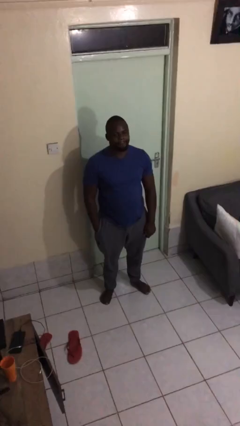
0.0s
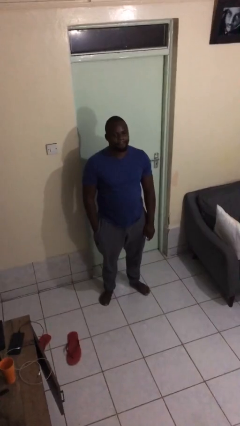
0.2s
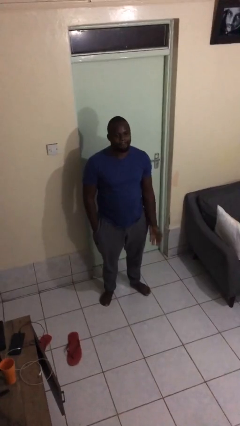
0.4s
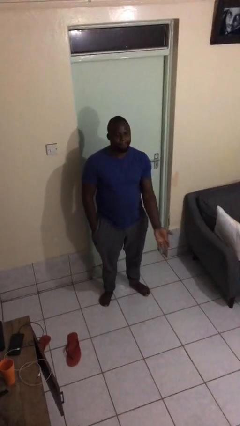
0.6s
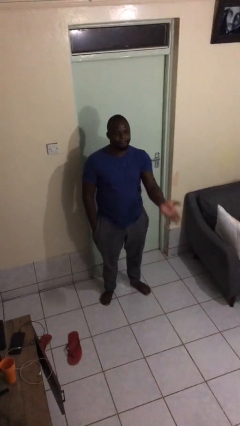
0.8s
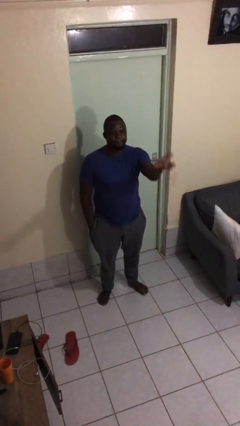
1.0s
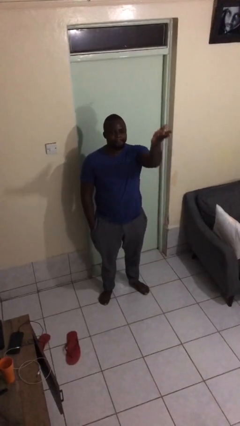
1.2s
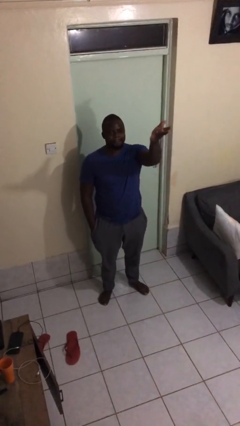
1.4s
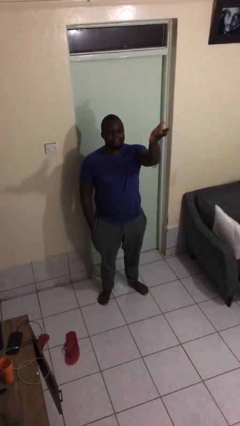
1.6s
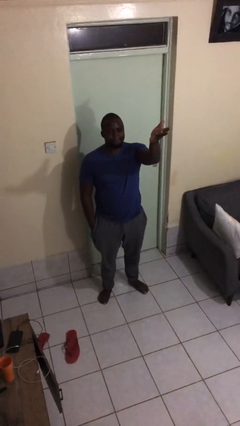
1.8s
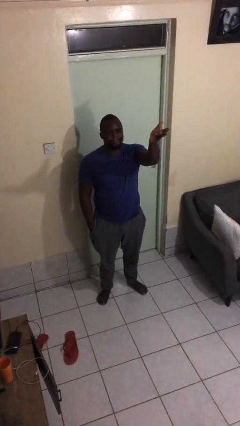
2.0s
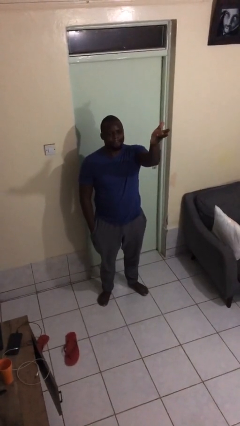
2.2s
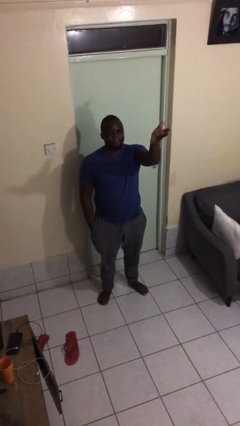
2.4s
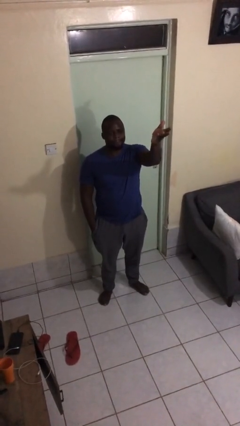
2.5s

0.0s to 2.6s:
person gestures swipe up

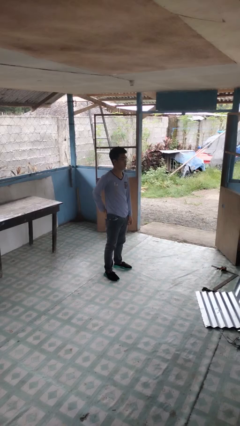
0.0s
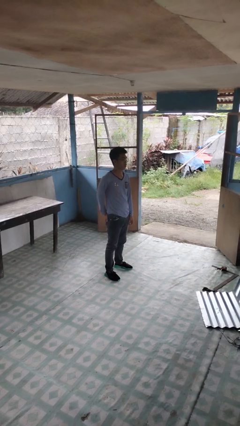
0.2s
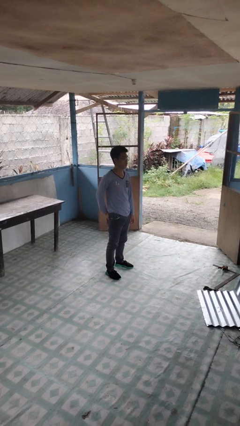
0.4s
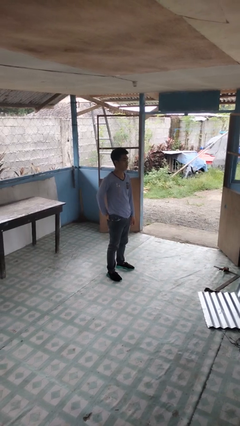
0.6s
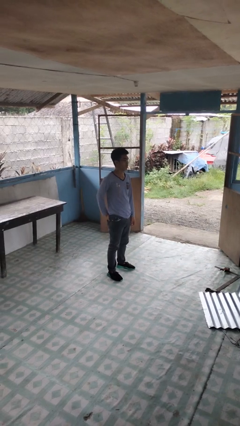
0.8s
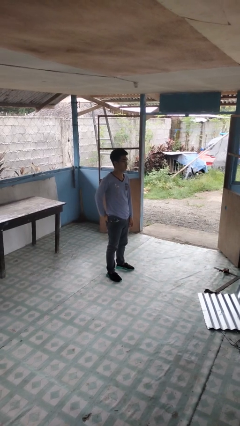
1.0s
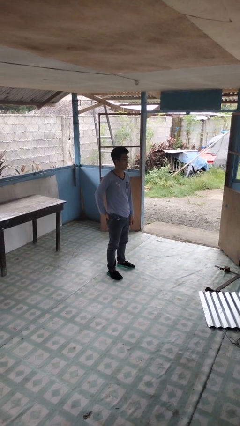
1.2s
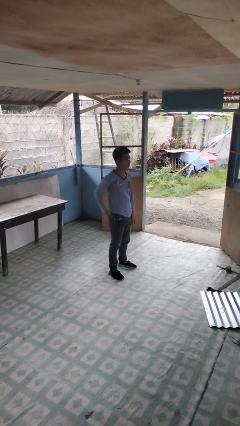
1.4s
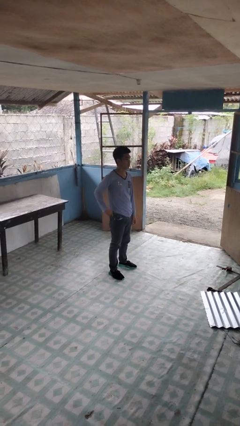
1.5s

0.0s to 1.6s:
person puts hands in back pockets

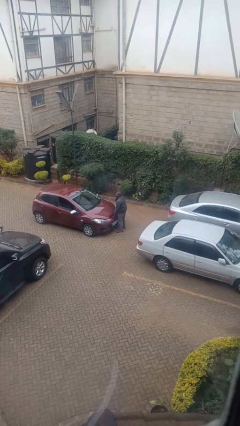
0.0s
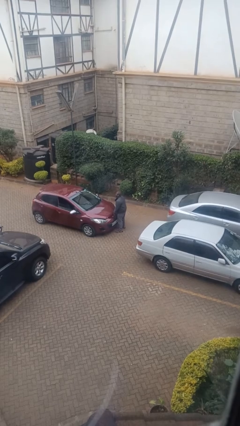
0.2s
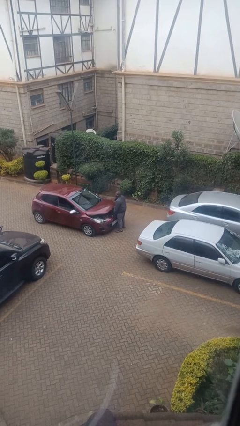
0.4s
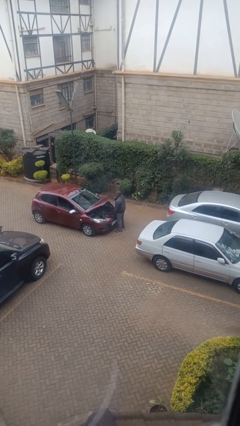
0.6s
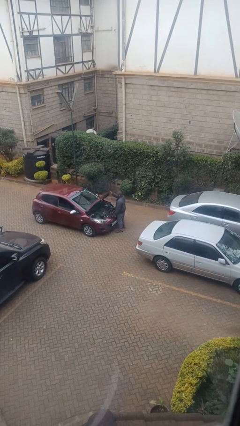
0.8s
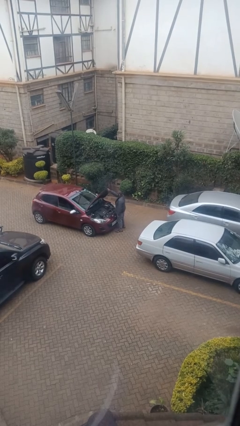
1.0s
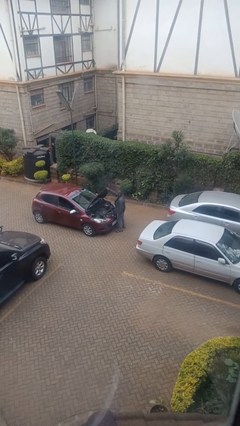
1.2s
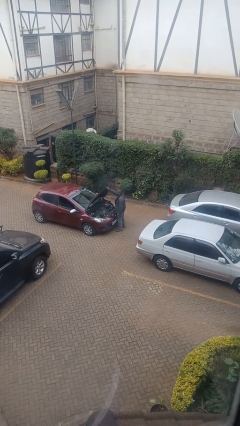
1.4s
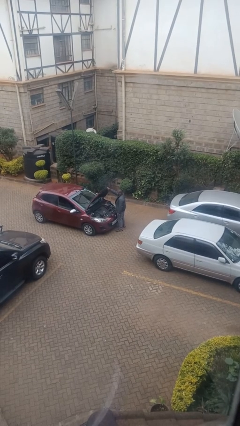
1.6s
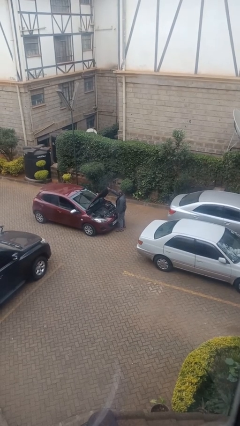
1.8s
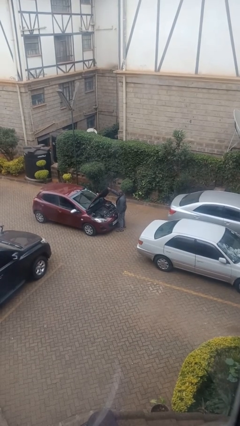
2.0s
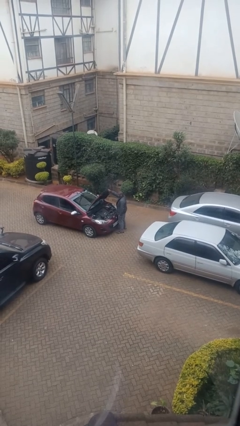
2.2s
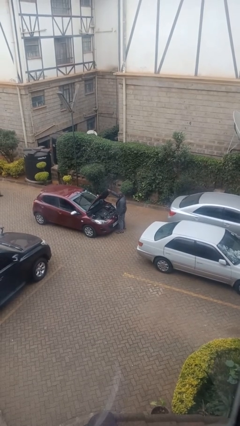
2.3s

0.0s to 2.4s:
person opens car hood

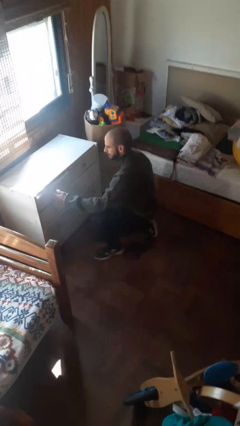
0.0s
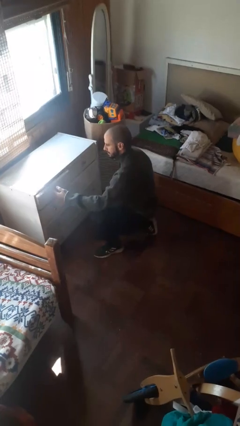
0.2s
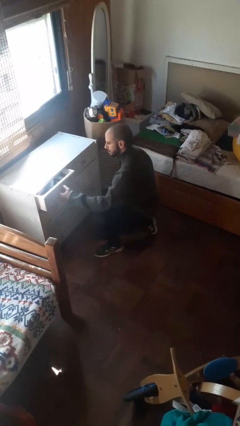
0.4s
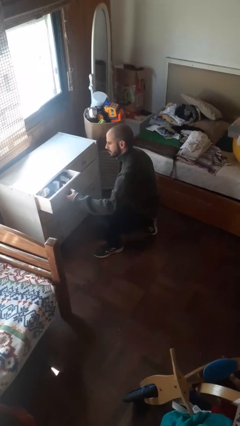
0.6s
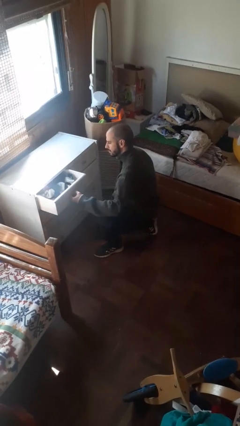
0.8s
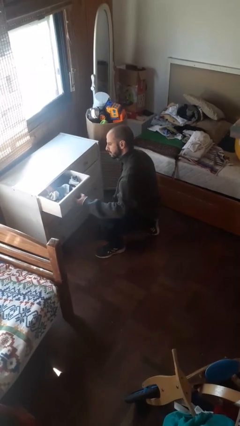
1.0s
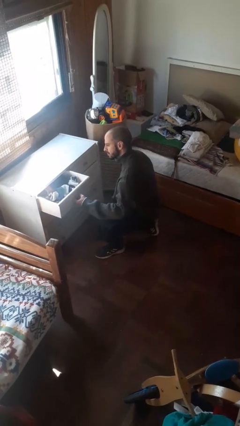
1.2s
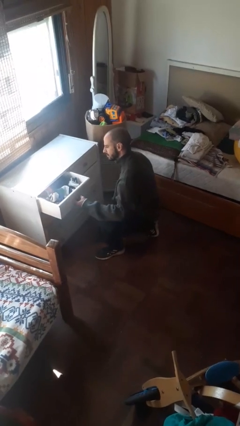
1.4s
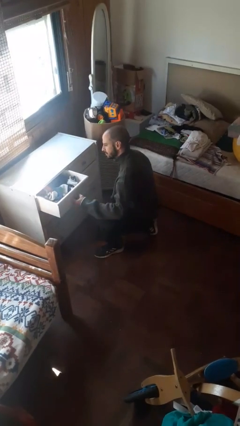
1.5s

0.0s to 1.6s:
person opens dresser drawer

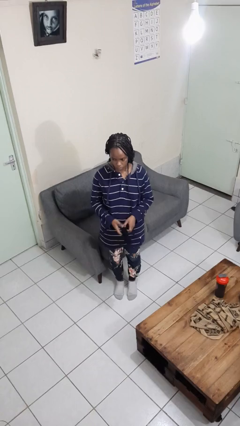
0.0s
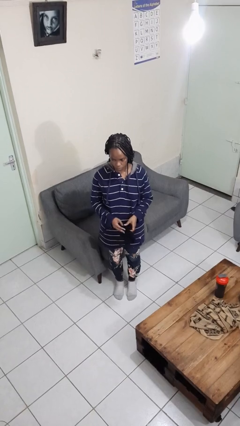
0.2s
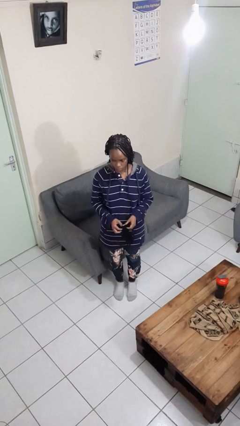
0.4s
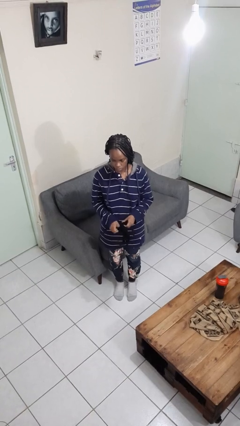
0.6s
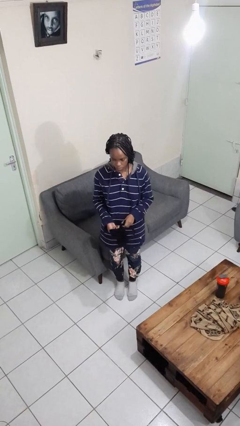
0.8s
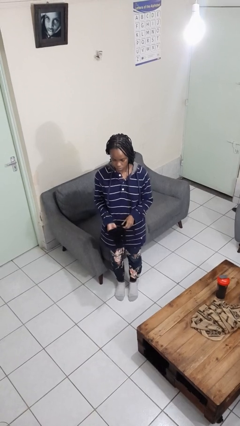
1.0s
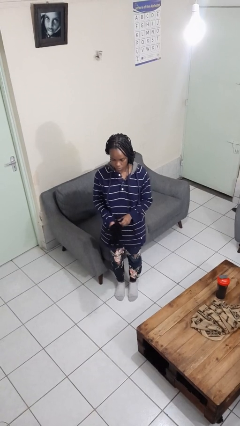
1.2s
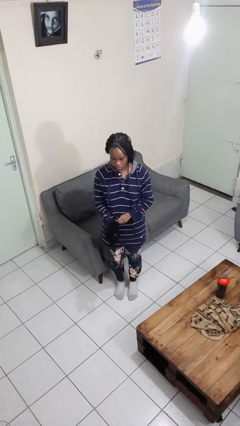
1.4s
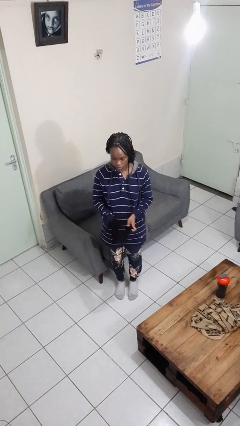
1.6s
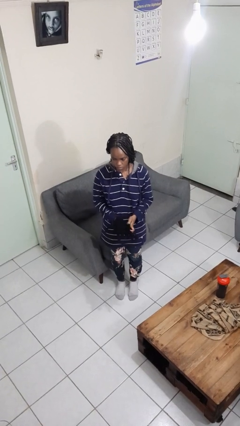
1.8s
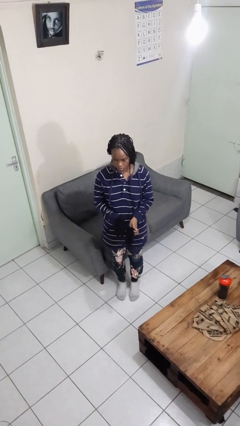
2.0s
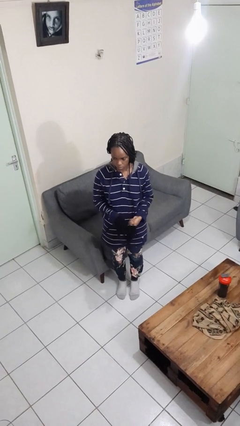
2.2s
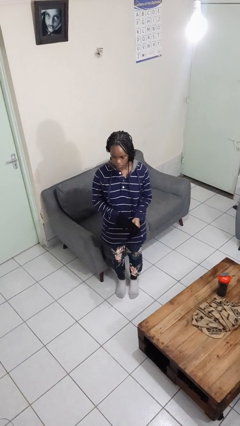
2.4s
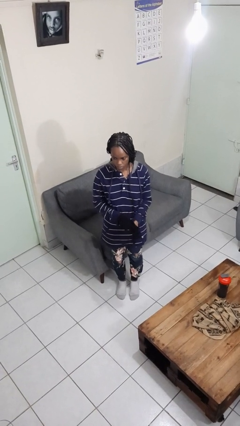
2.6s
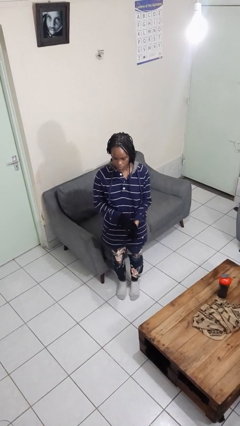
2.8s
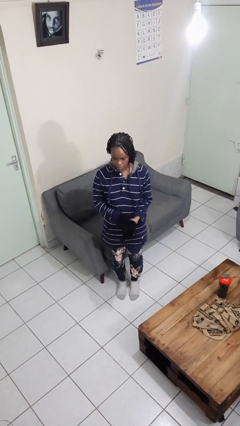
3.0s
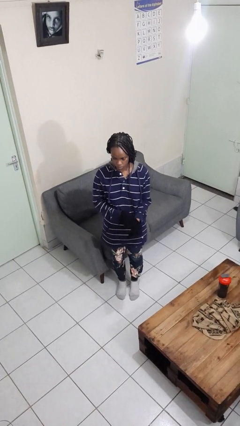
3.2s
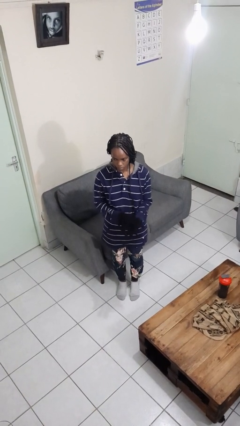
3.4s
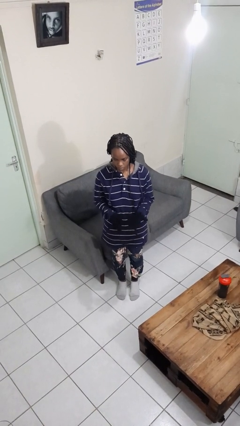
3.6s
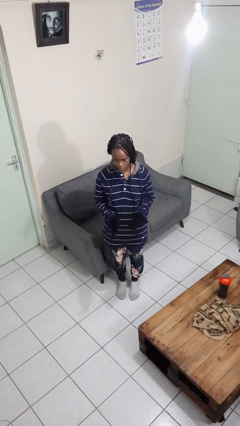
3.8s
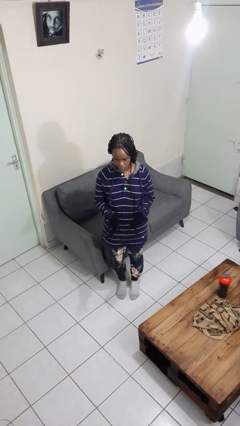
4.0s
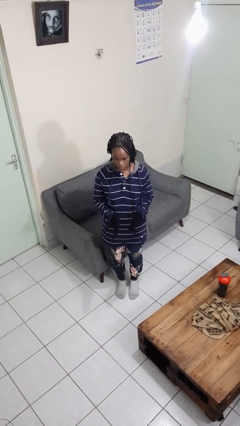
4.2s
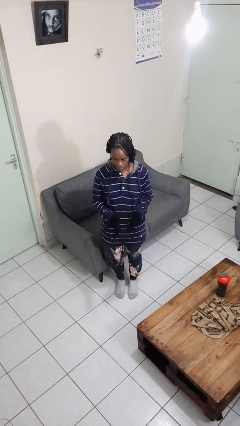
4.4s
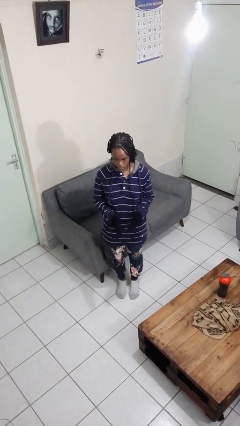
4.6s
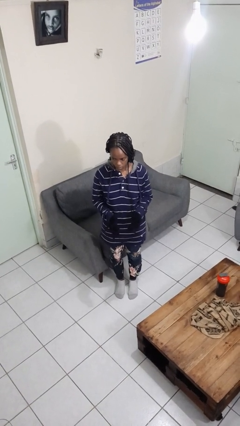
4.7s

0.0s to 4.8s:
person puts on gloves

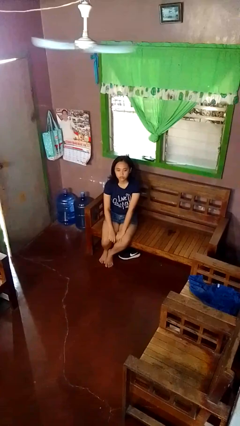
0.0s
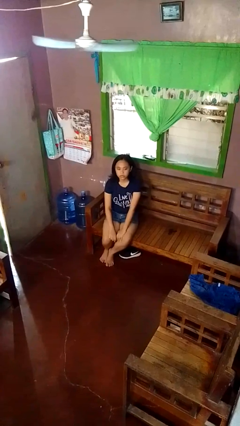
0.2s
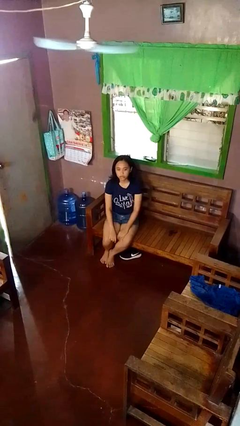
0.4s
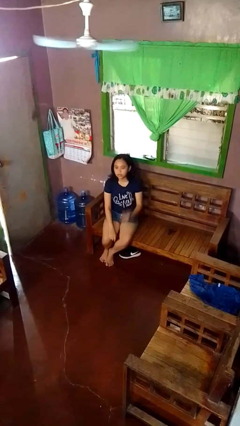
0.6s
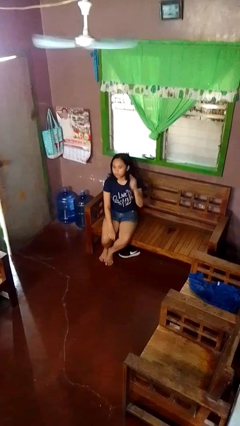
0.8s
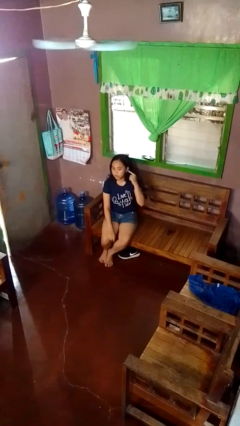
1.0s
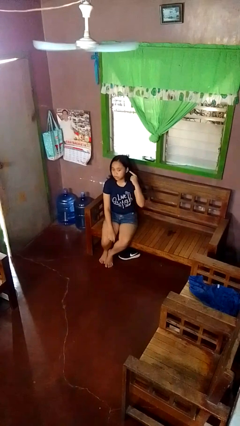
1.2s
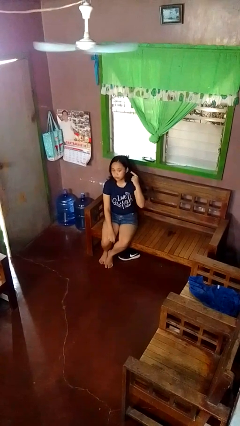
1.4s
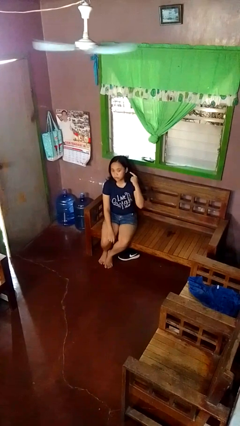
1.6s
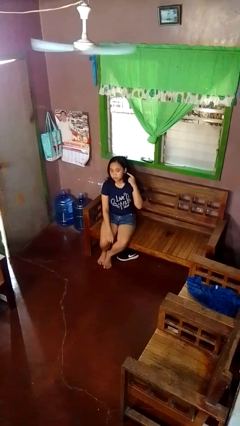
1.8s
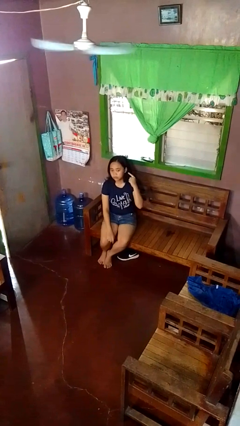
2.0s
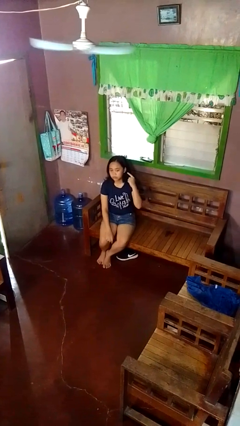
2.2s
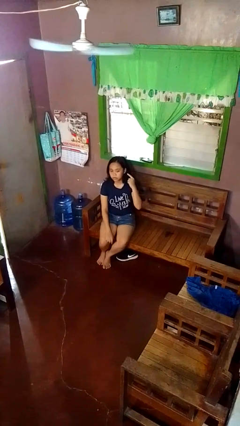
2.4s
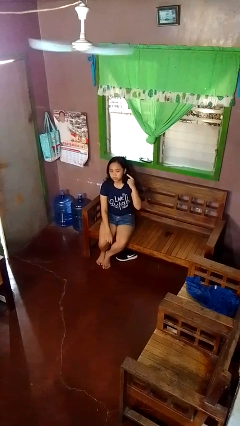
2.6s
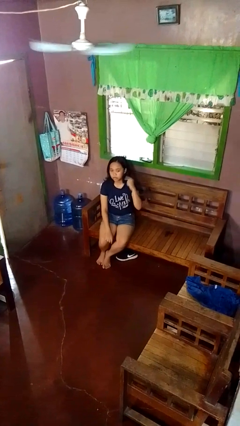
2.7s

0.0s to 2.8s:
person gestures listen closely

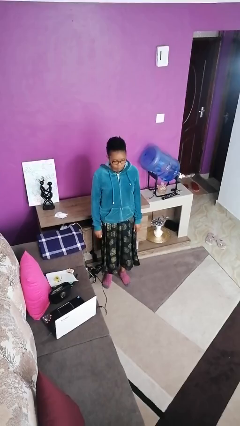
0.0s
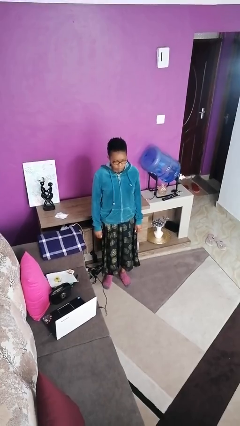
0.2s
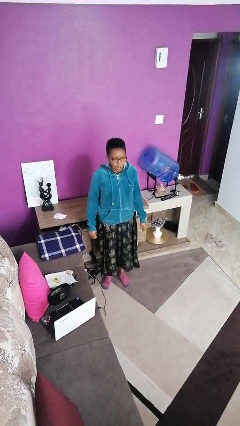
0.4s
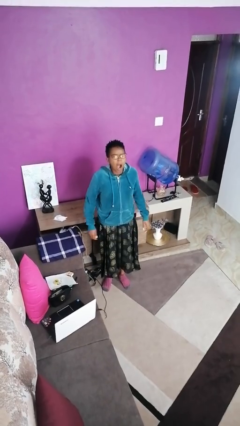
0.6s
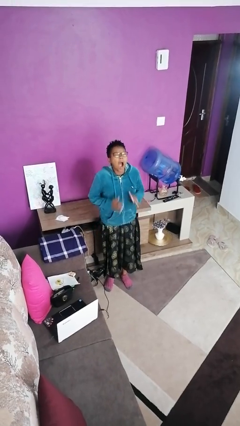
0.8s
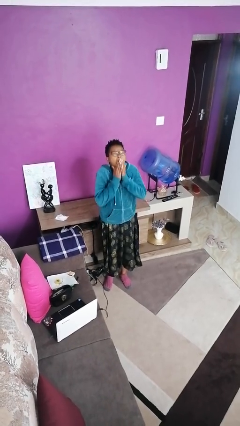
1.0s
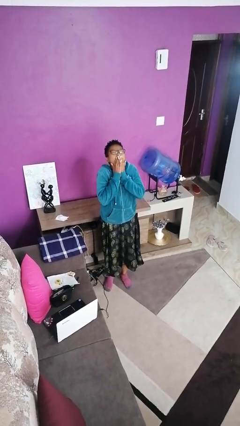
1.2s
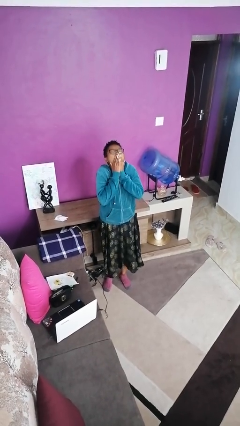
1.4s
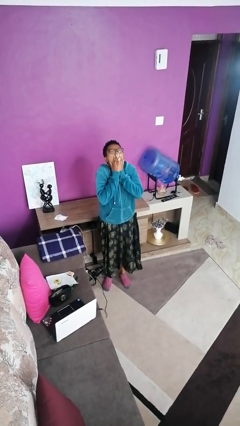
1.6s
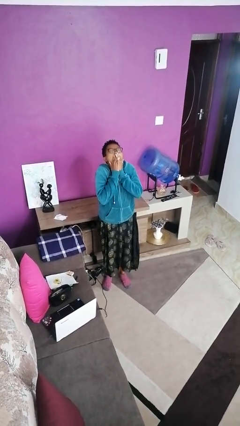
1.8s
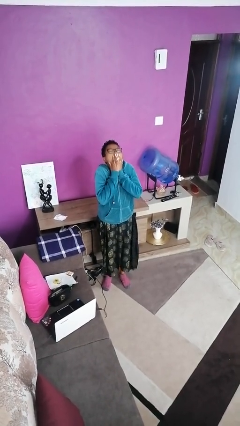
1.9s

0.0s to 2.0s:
person closes cabinet
